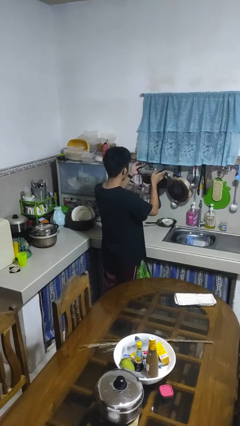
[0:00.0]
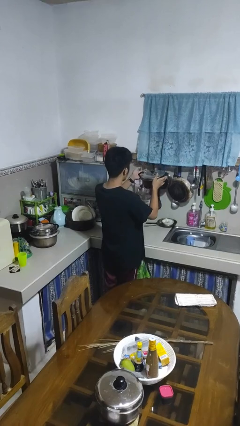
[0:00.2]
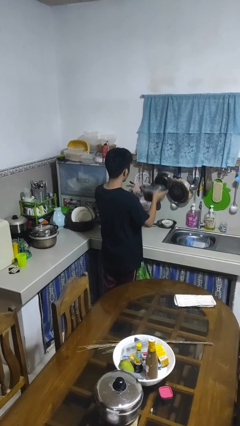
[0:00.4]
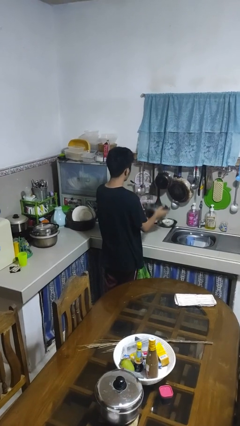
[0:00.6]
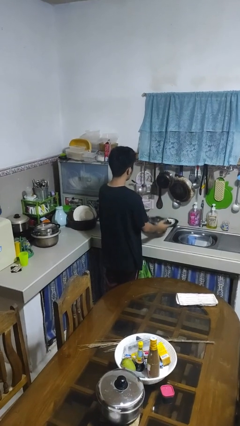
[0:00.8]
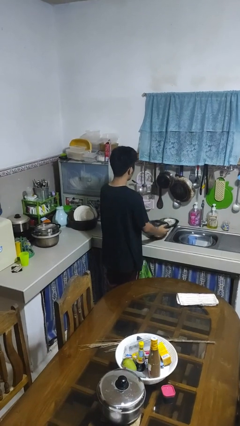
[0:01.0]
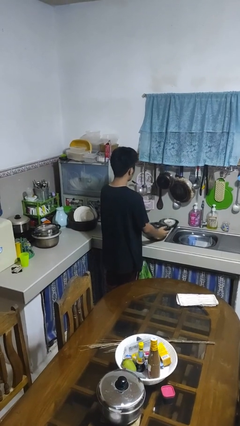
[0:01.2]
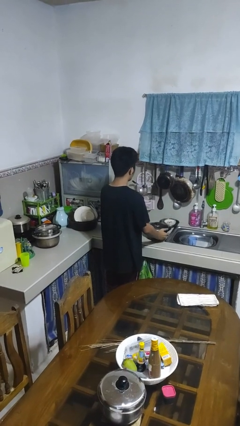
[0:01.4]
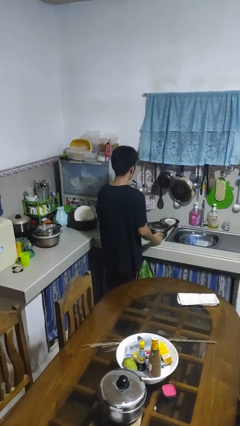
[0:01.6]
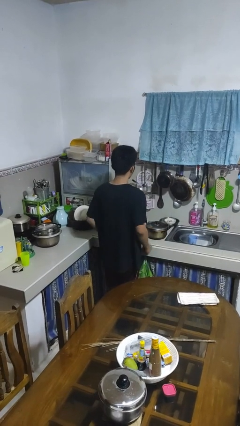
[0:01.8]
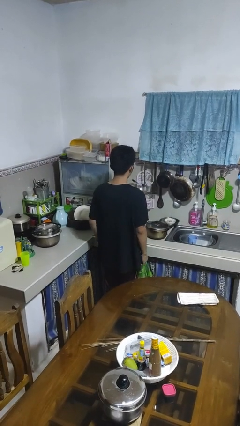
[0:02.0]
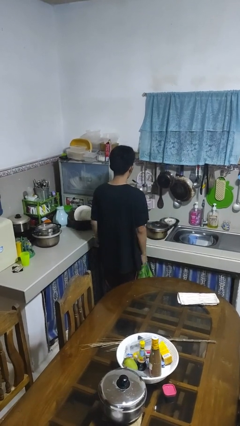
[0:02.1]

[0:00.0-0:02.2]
person puts down object on countertop

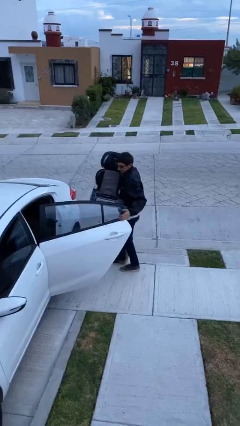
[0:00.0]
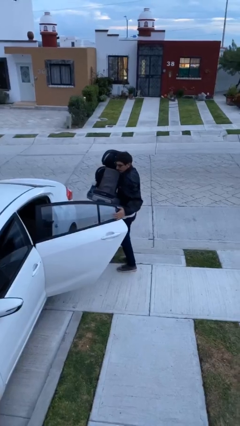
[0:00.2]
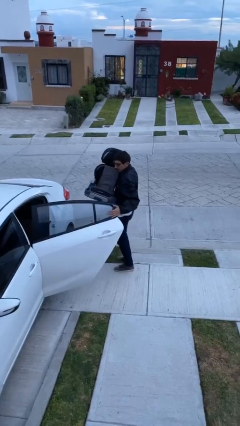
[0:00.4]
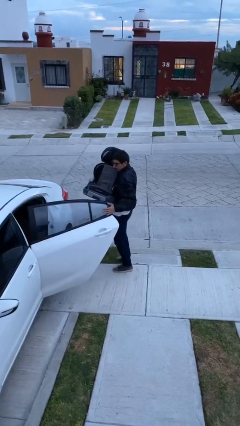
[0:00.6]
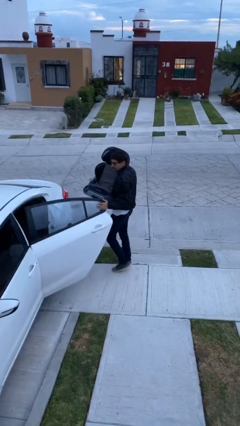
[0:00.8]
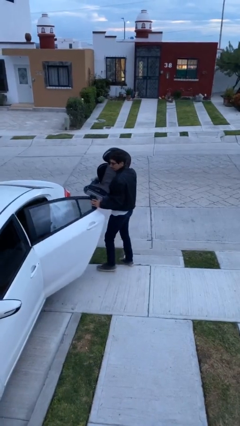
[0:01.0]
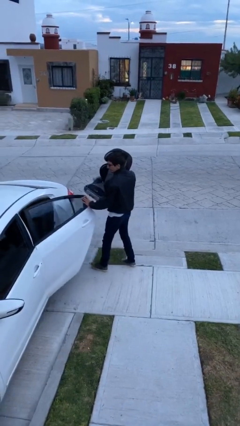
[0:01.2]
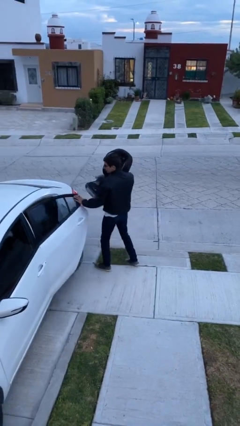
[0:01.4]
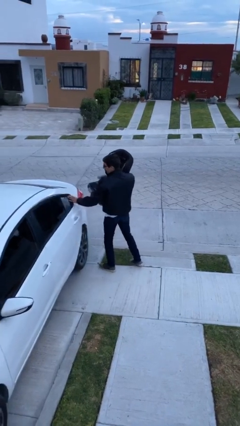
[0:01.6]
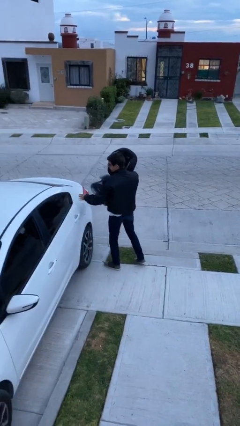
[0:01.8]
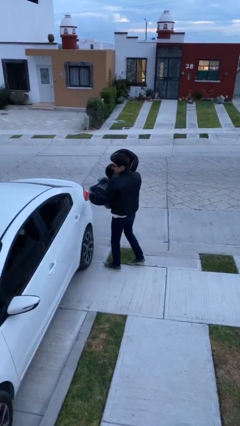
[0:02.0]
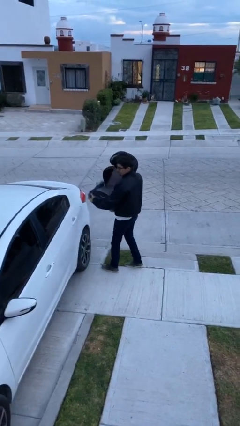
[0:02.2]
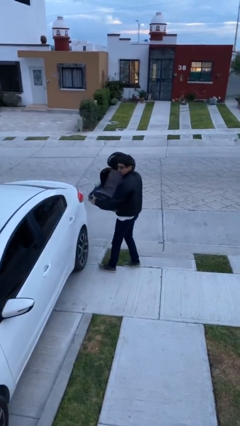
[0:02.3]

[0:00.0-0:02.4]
person closes car door

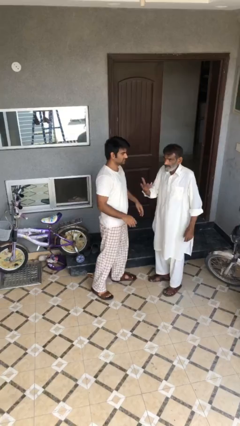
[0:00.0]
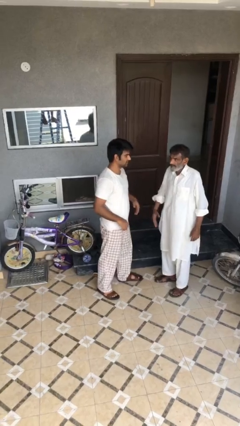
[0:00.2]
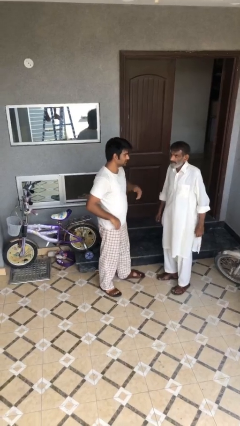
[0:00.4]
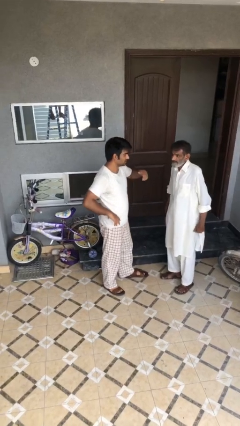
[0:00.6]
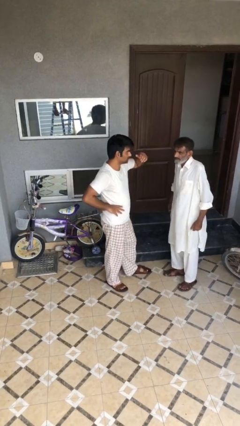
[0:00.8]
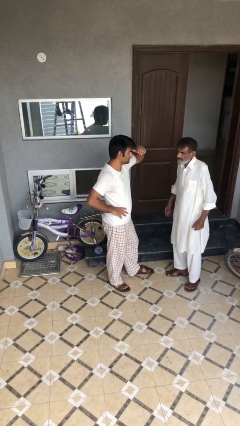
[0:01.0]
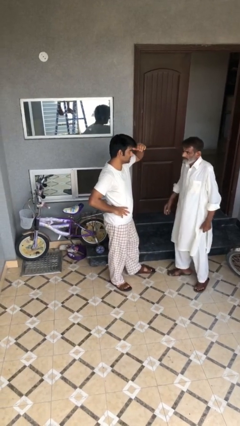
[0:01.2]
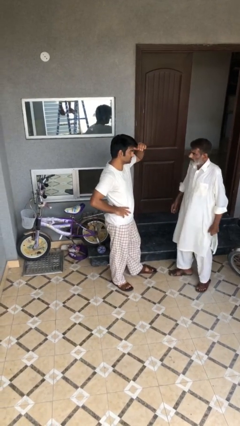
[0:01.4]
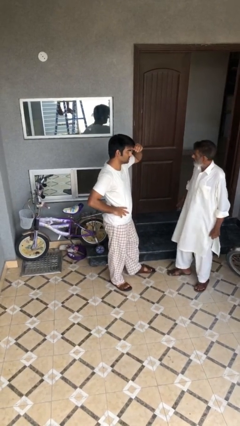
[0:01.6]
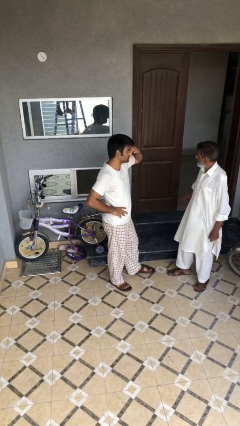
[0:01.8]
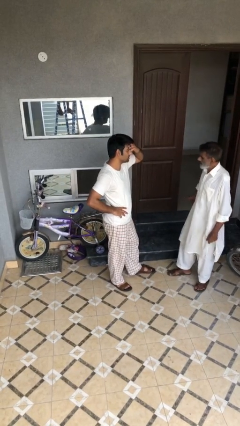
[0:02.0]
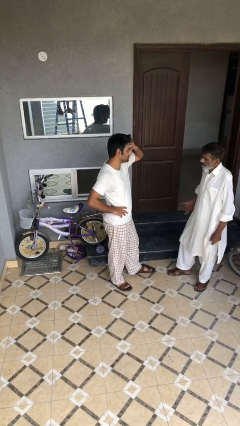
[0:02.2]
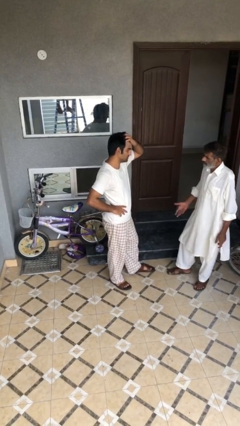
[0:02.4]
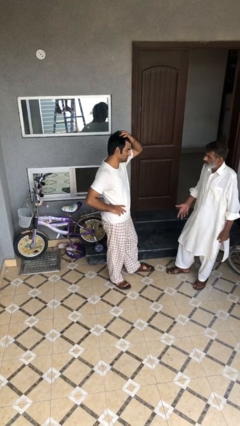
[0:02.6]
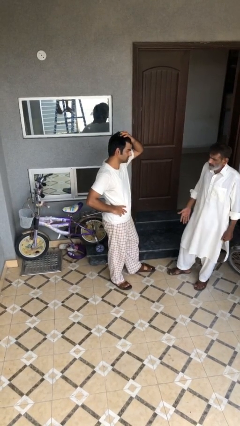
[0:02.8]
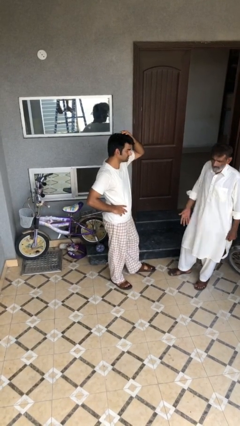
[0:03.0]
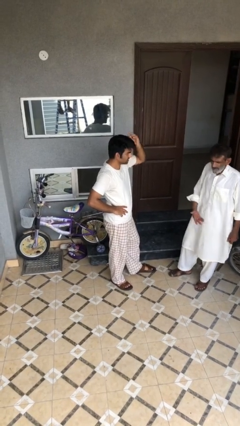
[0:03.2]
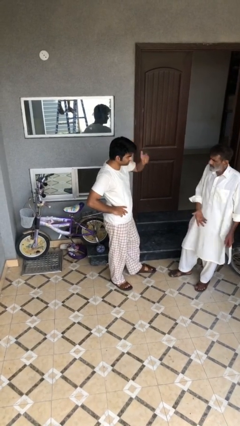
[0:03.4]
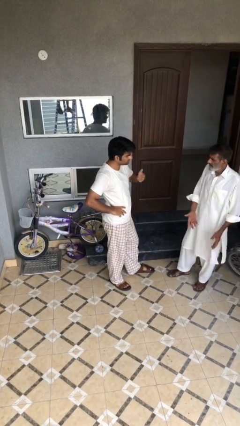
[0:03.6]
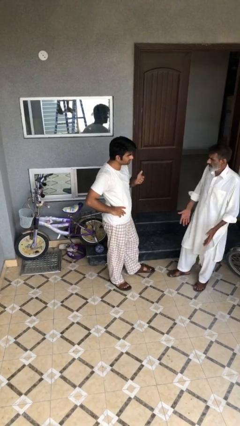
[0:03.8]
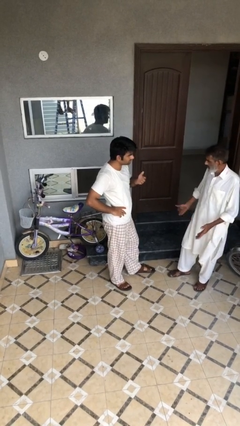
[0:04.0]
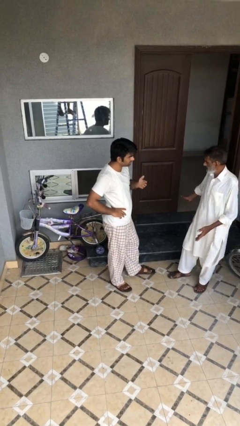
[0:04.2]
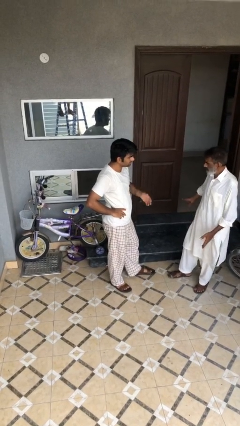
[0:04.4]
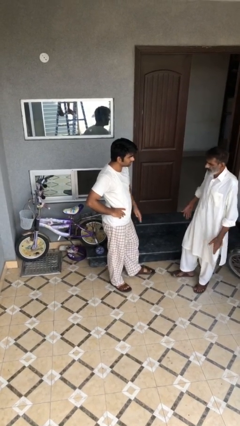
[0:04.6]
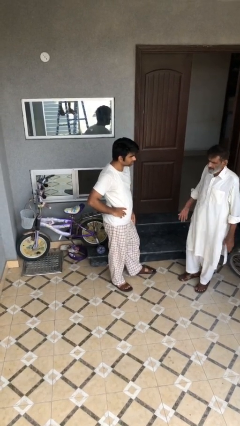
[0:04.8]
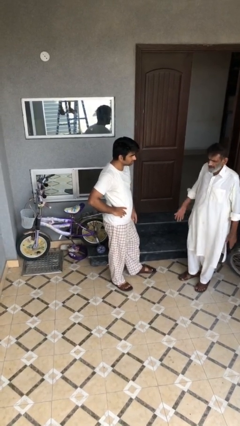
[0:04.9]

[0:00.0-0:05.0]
person talks to person

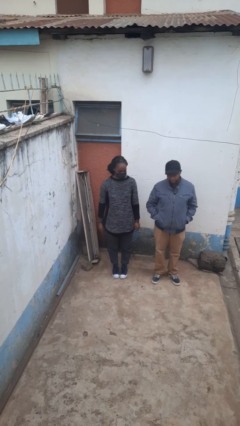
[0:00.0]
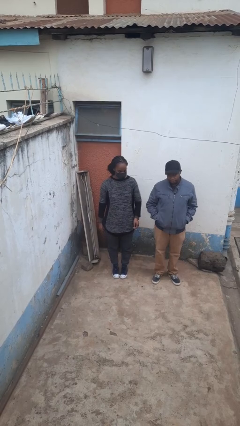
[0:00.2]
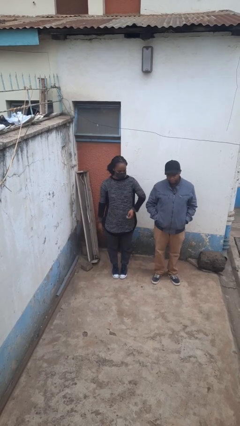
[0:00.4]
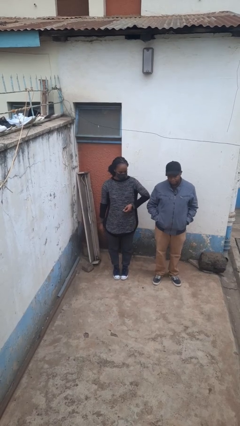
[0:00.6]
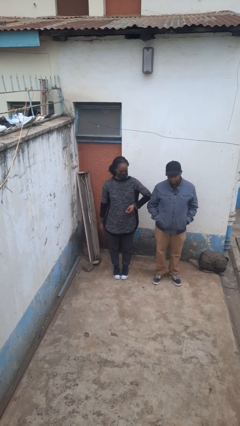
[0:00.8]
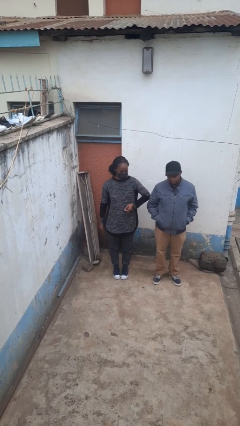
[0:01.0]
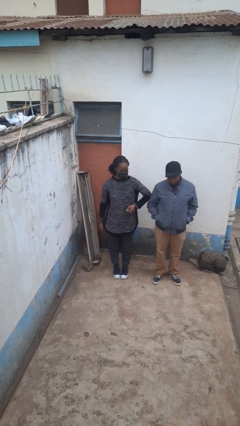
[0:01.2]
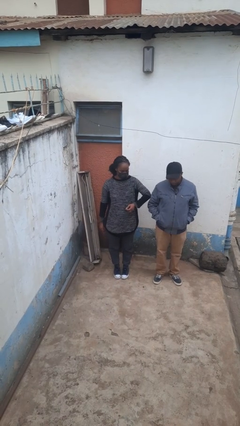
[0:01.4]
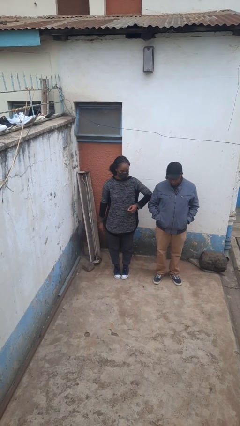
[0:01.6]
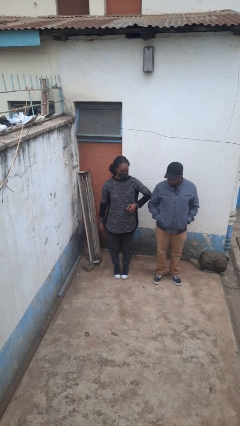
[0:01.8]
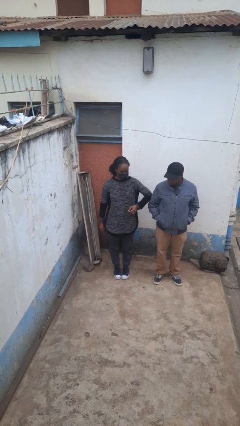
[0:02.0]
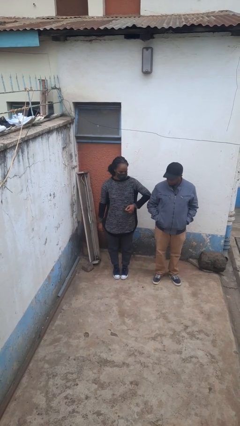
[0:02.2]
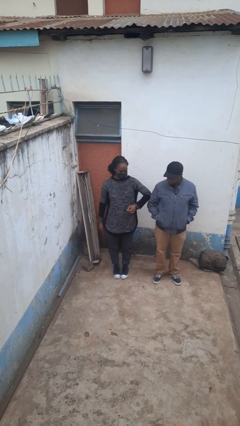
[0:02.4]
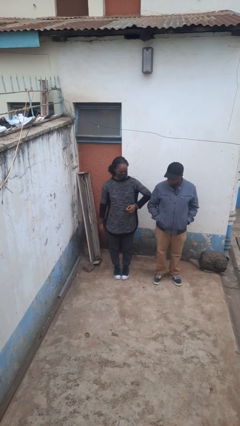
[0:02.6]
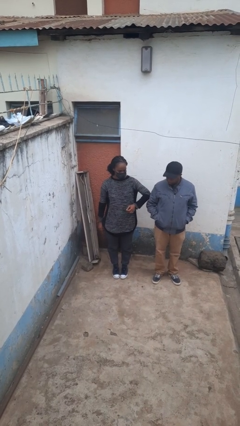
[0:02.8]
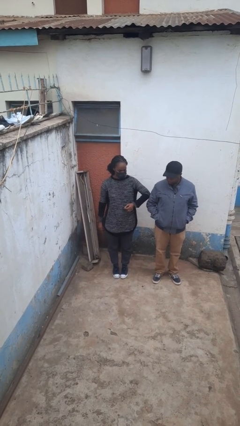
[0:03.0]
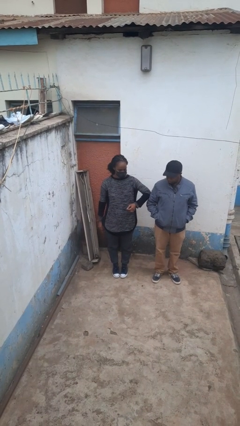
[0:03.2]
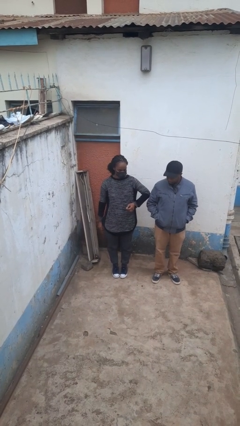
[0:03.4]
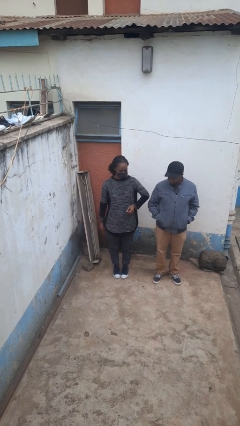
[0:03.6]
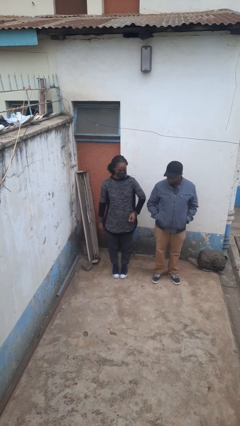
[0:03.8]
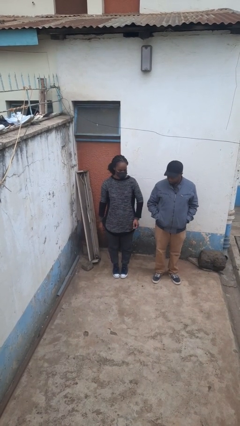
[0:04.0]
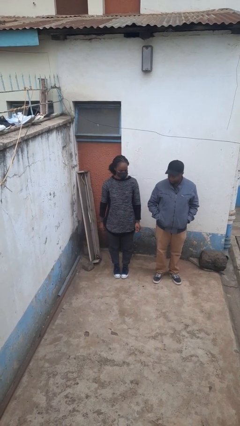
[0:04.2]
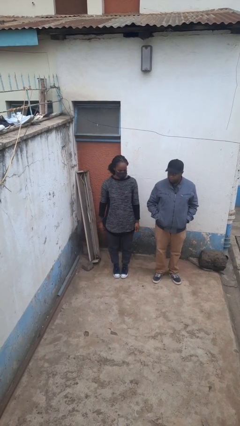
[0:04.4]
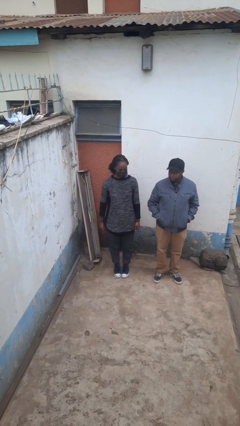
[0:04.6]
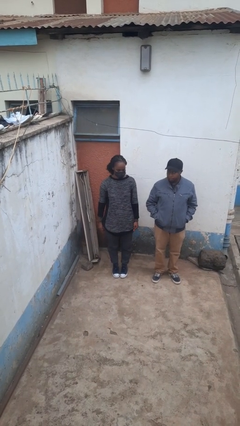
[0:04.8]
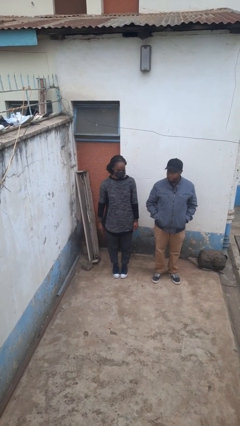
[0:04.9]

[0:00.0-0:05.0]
person nudges person with elbow

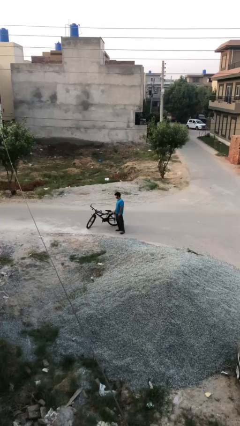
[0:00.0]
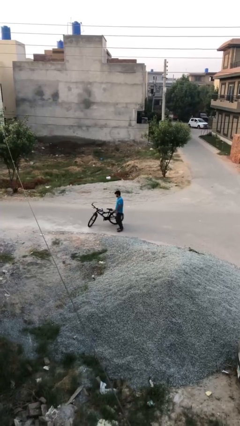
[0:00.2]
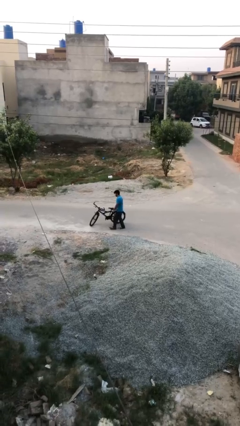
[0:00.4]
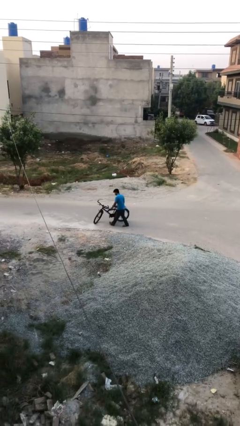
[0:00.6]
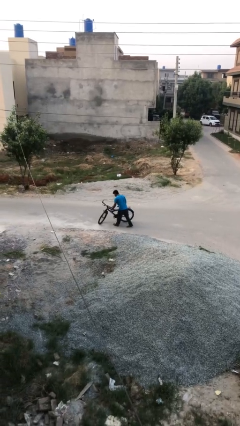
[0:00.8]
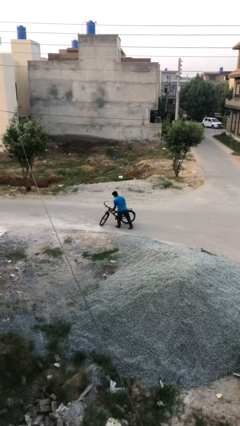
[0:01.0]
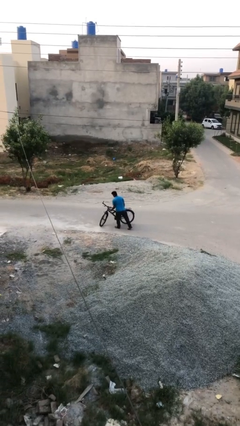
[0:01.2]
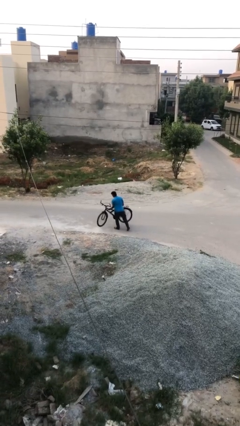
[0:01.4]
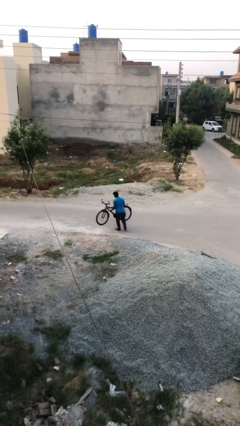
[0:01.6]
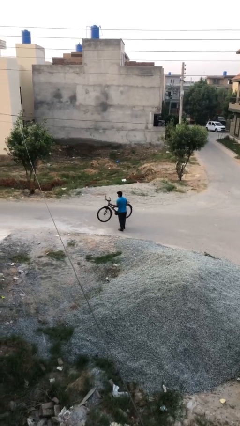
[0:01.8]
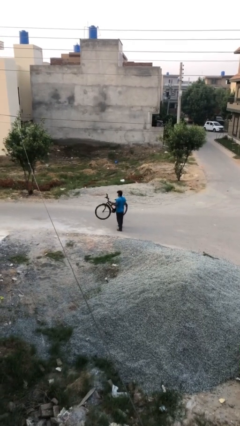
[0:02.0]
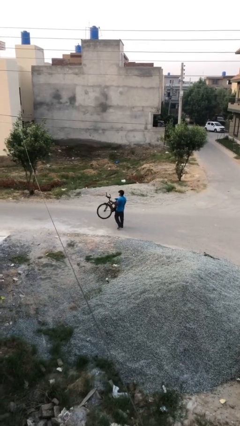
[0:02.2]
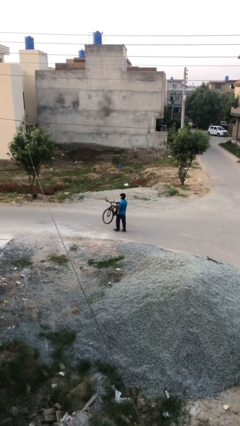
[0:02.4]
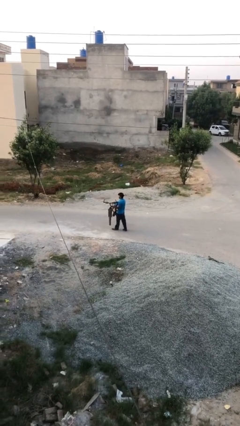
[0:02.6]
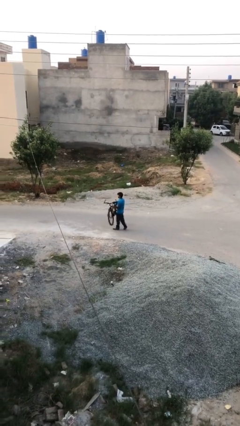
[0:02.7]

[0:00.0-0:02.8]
person picks up object from floor

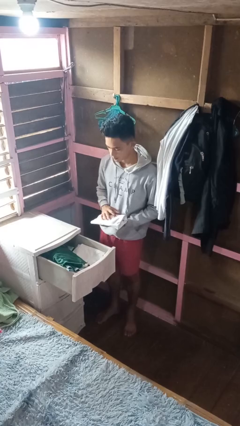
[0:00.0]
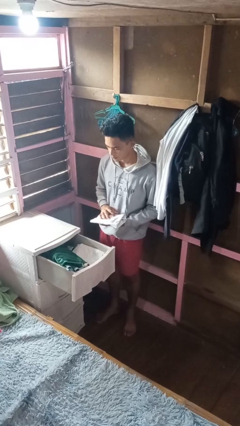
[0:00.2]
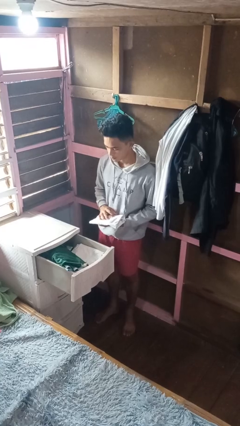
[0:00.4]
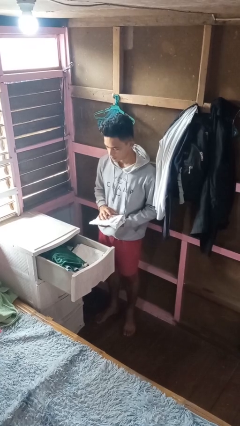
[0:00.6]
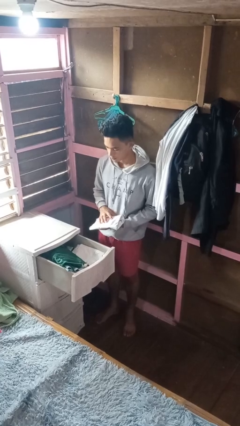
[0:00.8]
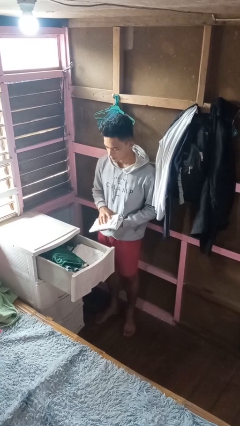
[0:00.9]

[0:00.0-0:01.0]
person takes clothes from dresser
